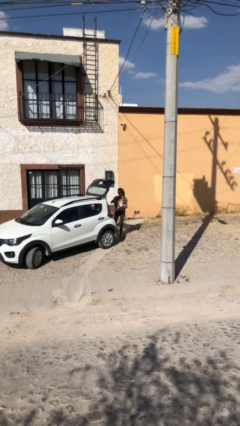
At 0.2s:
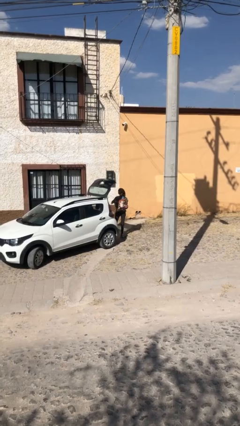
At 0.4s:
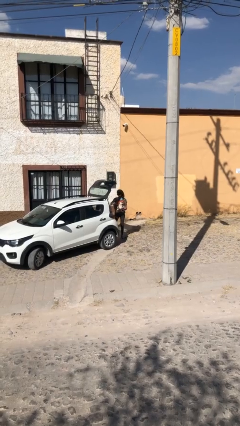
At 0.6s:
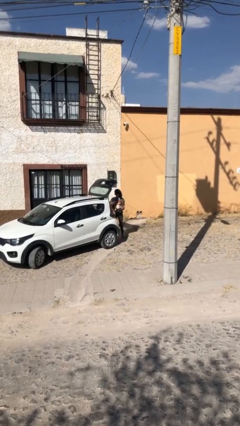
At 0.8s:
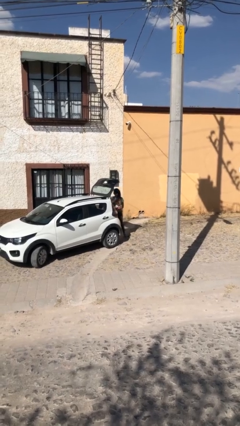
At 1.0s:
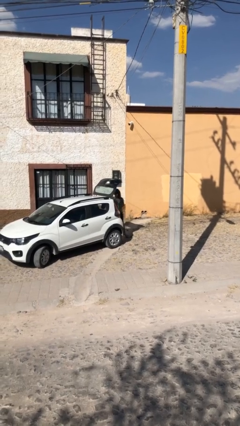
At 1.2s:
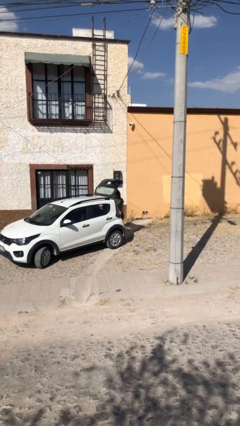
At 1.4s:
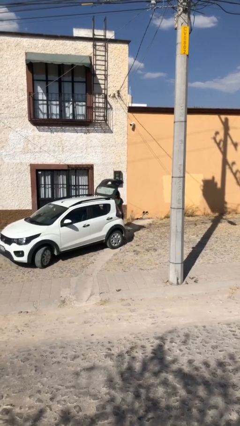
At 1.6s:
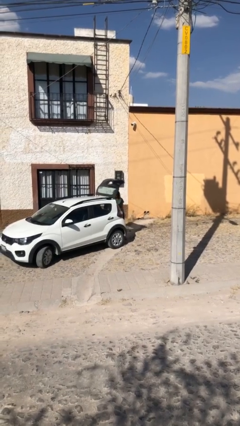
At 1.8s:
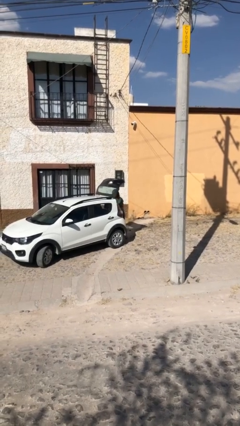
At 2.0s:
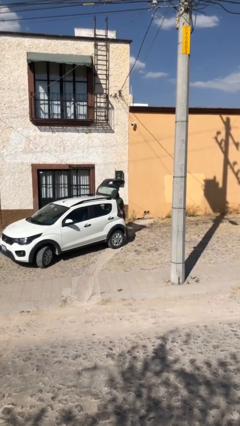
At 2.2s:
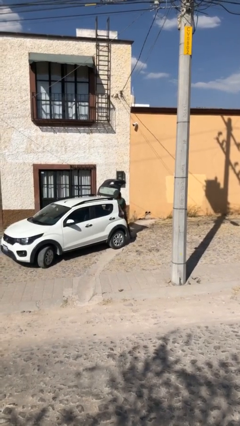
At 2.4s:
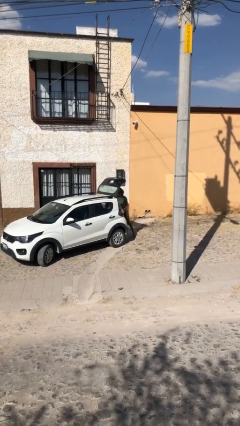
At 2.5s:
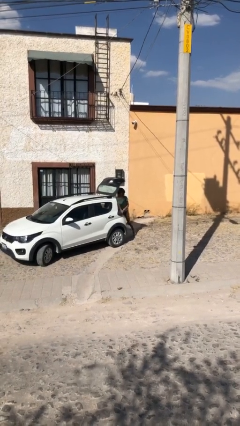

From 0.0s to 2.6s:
person loads car

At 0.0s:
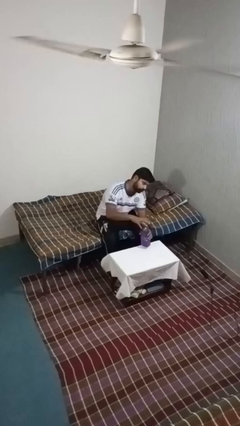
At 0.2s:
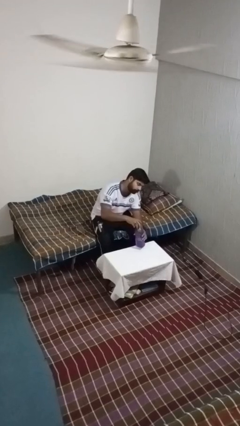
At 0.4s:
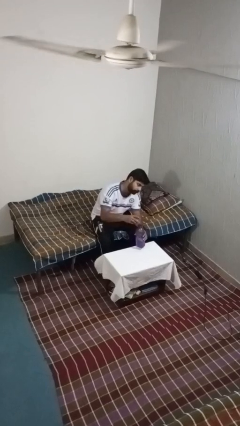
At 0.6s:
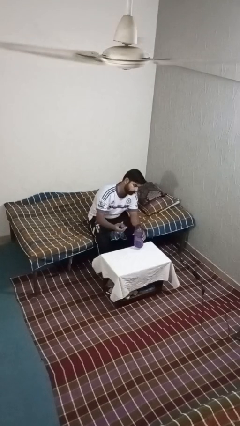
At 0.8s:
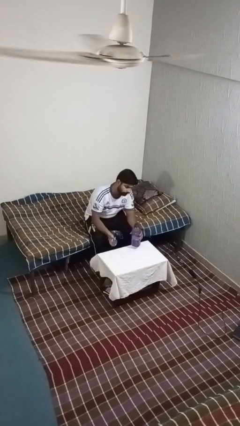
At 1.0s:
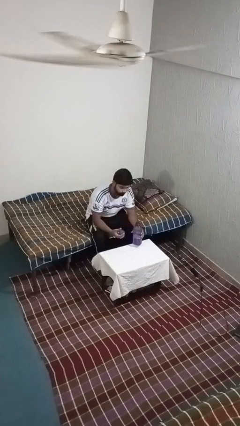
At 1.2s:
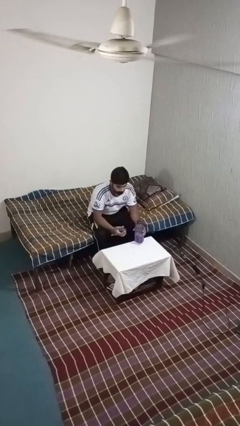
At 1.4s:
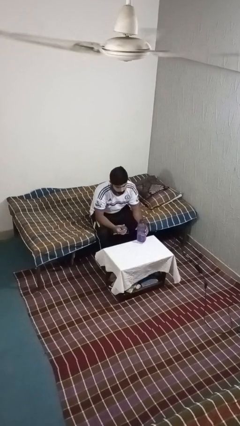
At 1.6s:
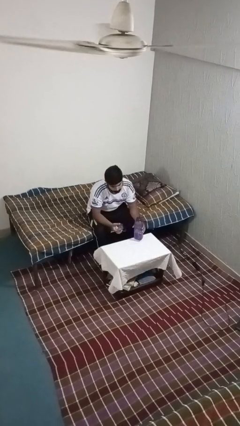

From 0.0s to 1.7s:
person unscrews lid from bottle

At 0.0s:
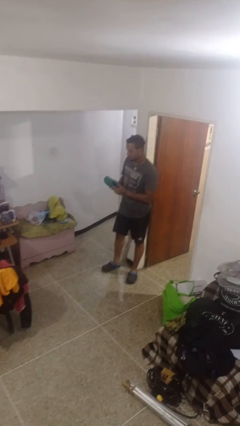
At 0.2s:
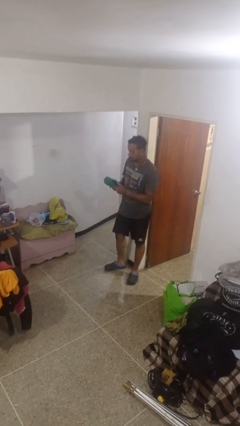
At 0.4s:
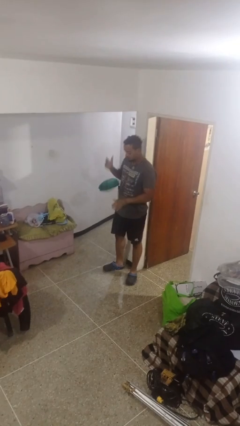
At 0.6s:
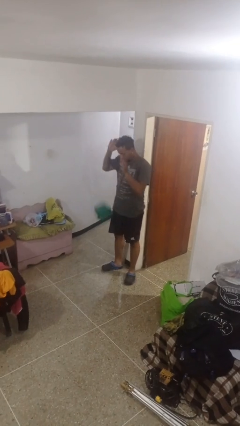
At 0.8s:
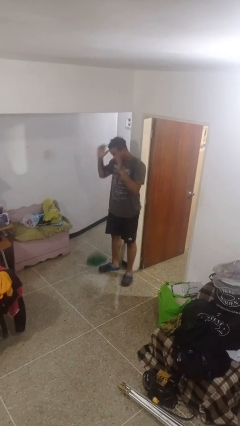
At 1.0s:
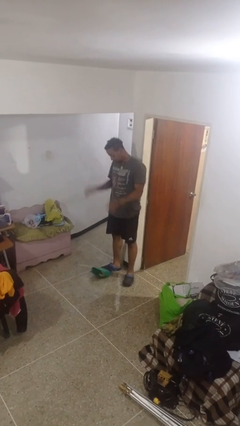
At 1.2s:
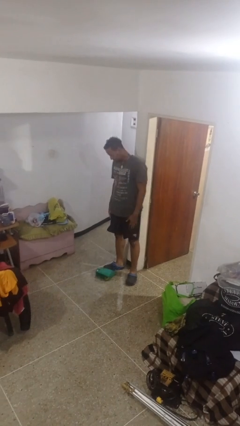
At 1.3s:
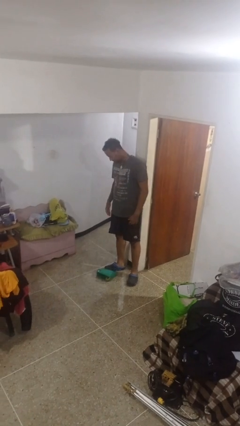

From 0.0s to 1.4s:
person drops object

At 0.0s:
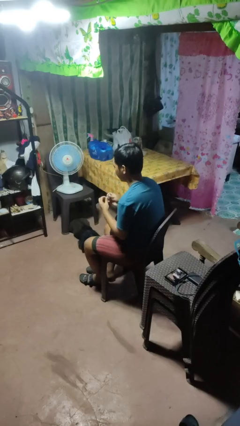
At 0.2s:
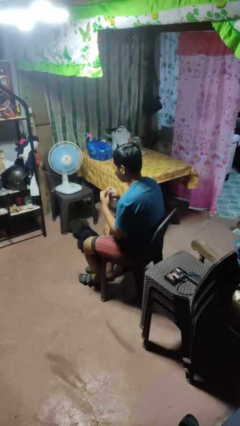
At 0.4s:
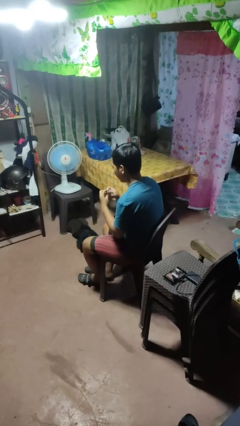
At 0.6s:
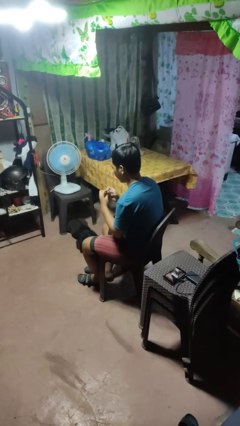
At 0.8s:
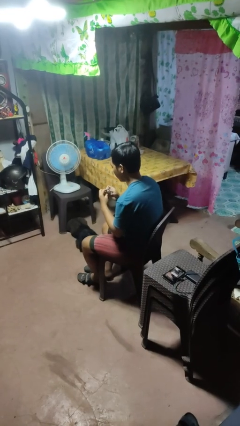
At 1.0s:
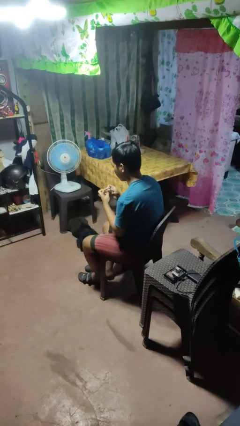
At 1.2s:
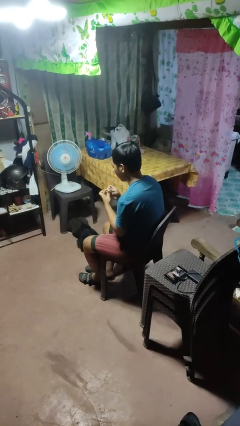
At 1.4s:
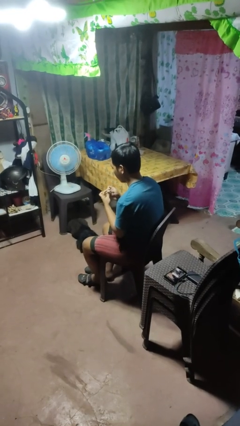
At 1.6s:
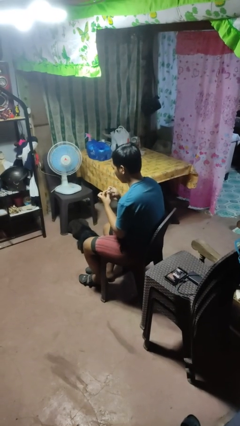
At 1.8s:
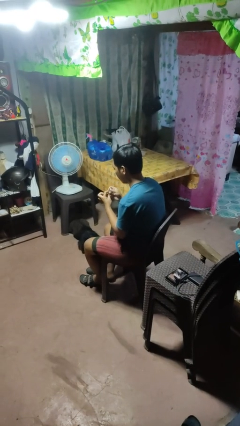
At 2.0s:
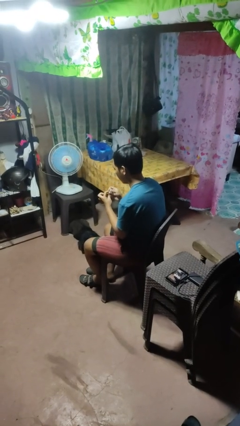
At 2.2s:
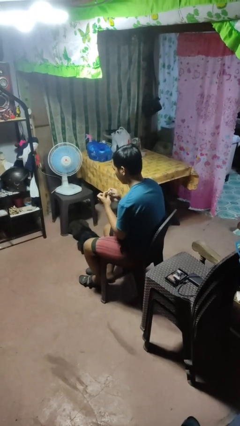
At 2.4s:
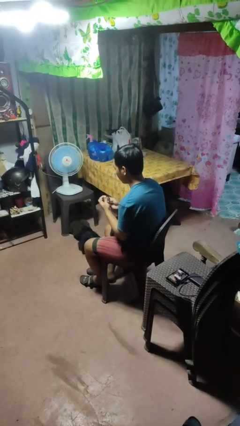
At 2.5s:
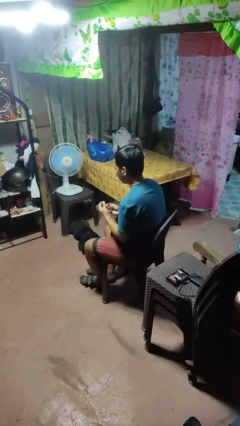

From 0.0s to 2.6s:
person files fingernails

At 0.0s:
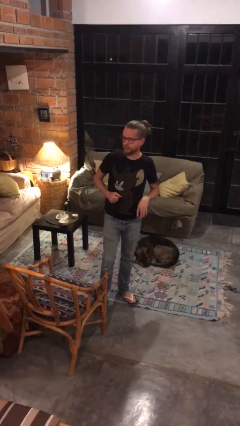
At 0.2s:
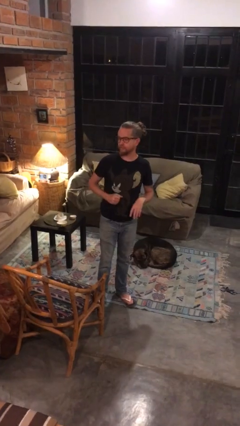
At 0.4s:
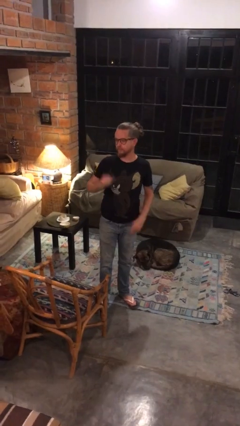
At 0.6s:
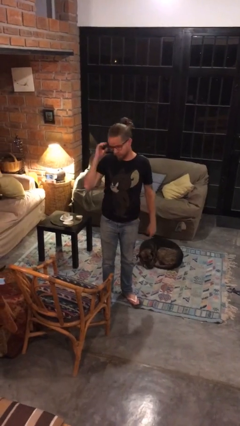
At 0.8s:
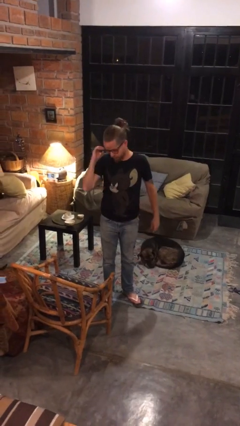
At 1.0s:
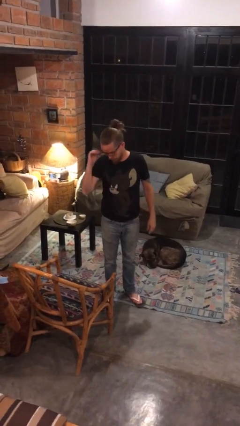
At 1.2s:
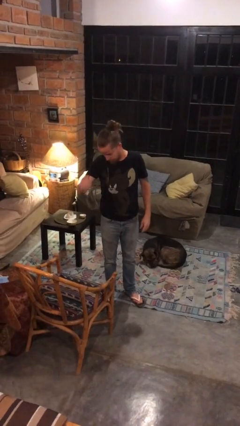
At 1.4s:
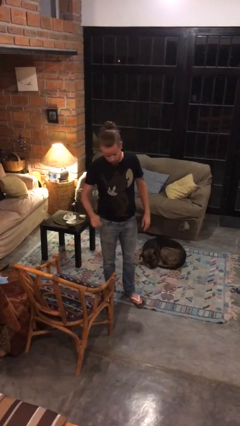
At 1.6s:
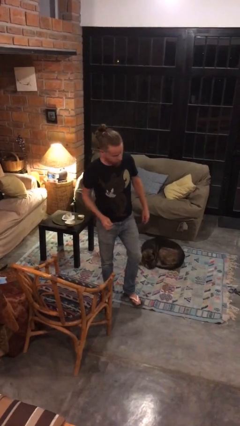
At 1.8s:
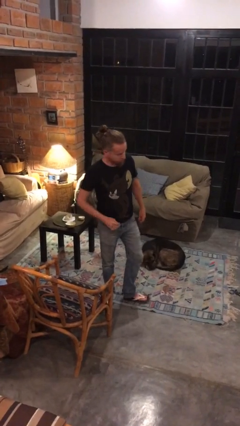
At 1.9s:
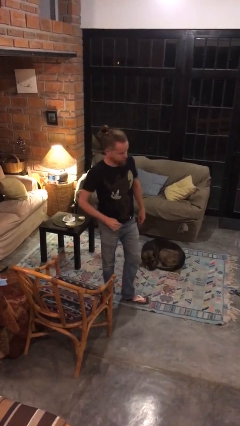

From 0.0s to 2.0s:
person takes off glasses

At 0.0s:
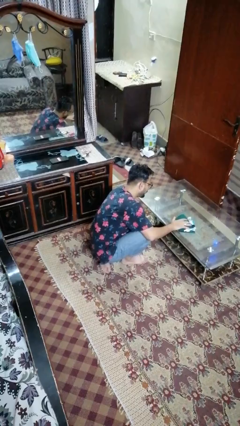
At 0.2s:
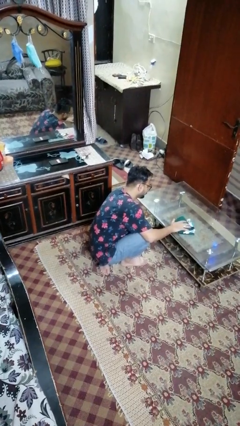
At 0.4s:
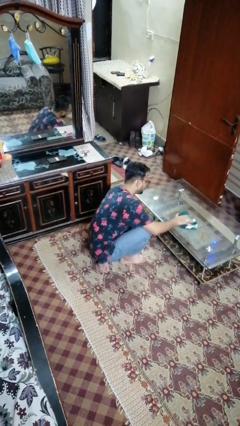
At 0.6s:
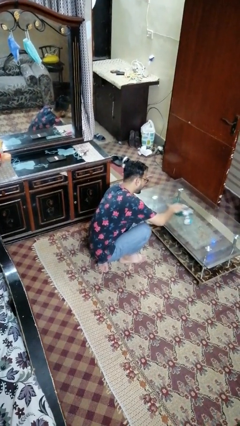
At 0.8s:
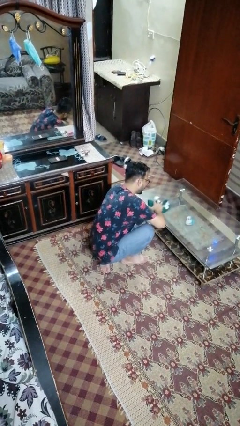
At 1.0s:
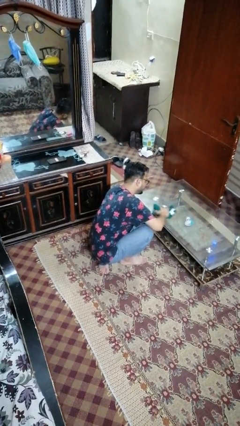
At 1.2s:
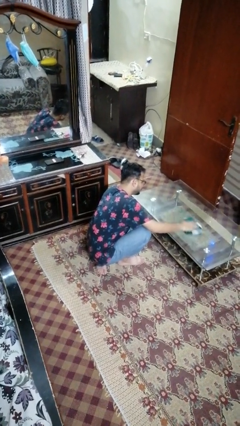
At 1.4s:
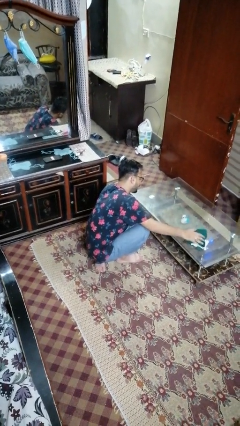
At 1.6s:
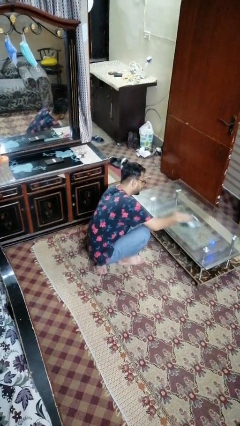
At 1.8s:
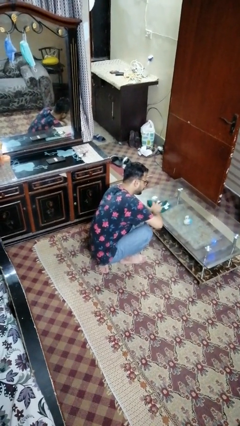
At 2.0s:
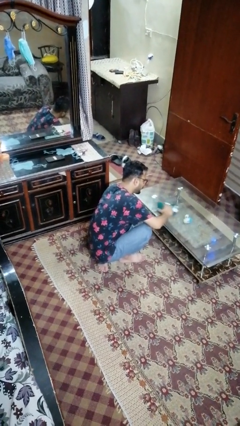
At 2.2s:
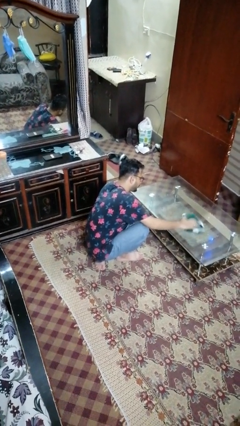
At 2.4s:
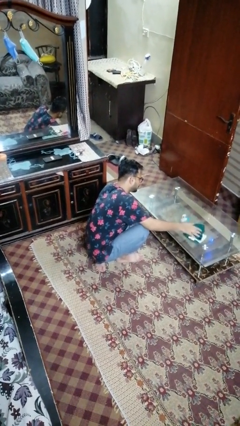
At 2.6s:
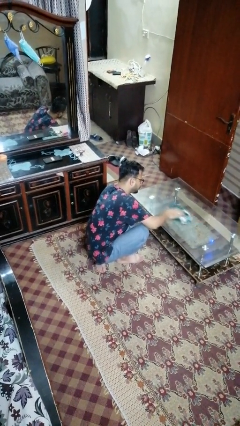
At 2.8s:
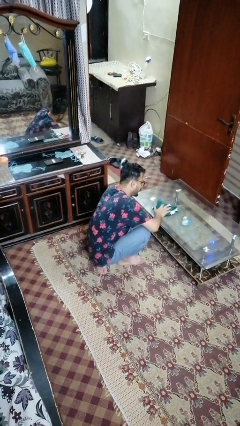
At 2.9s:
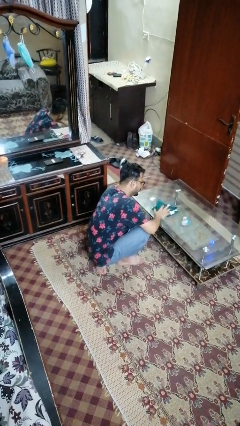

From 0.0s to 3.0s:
person cleans table with rag

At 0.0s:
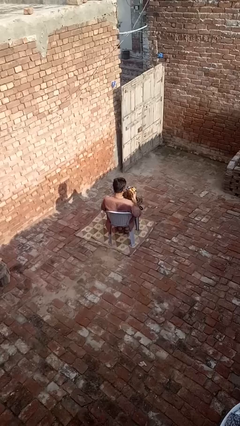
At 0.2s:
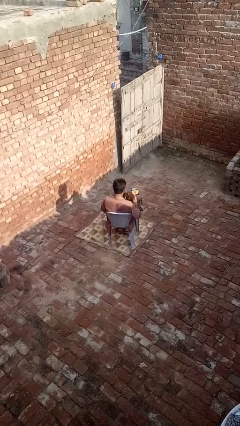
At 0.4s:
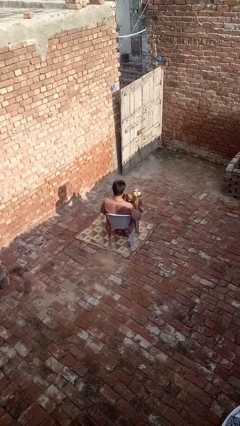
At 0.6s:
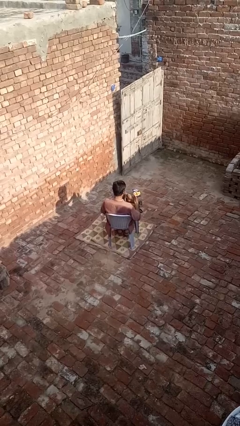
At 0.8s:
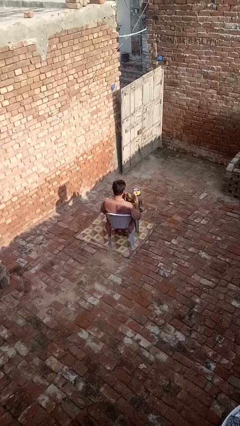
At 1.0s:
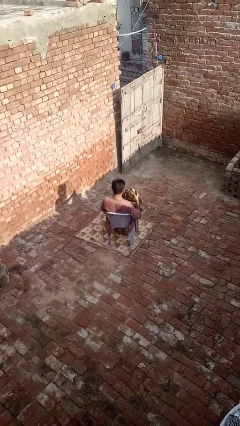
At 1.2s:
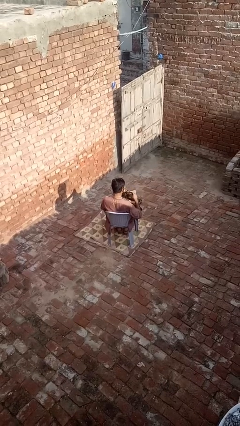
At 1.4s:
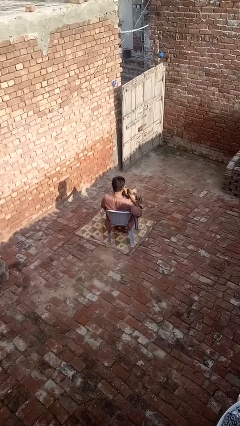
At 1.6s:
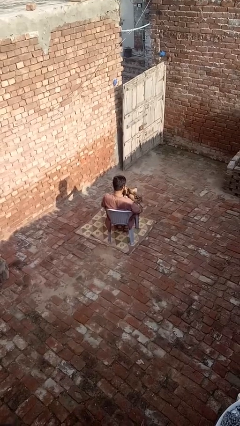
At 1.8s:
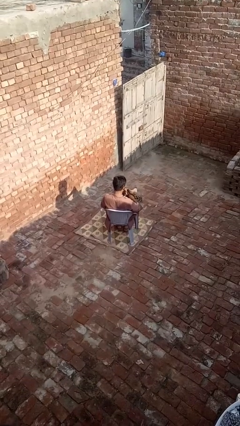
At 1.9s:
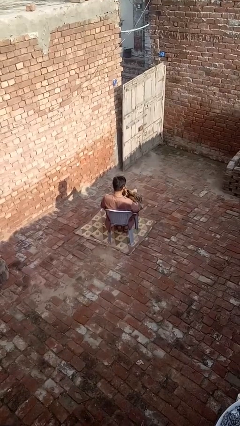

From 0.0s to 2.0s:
person puts object into purse

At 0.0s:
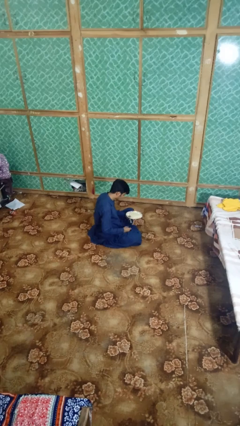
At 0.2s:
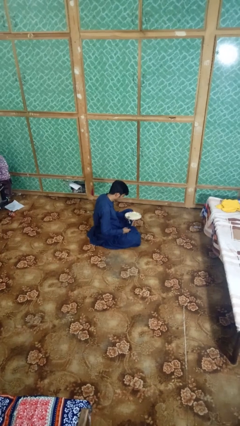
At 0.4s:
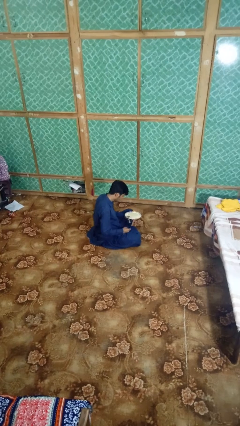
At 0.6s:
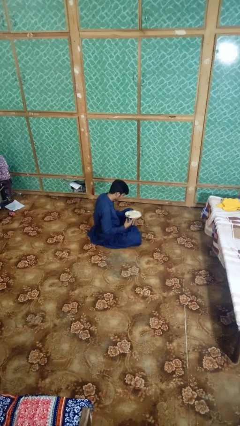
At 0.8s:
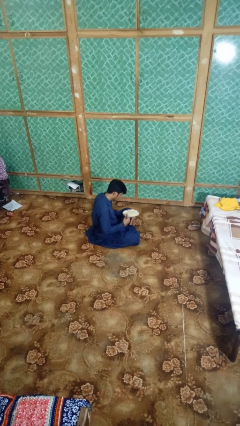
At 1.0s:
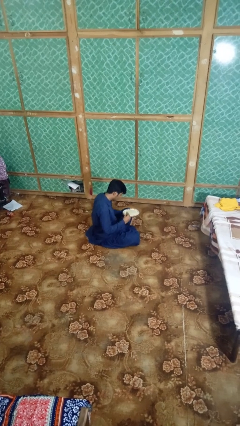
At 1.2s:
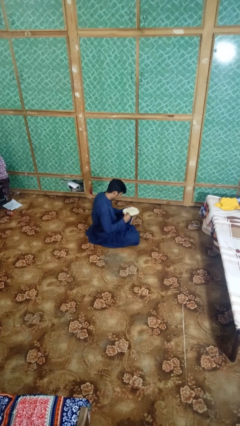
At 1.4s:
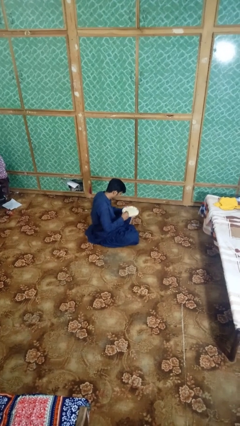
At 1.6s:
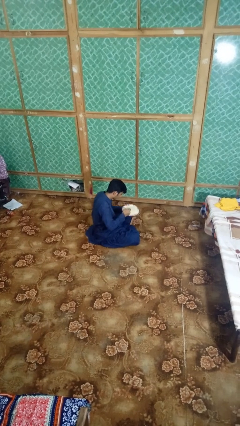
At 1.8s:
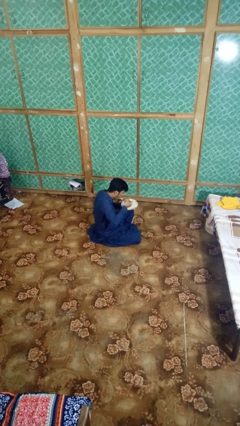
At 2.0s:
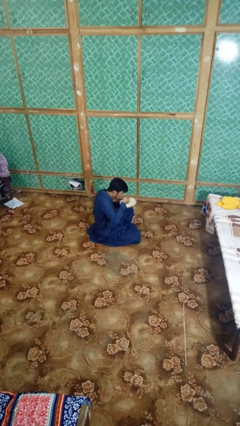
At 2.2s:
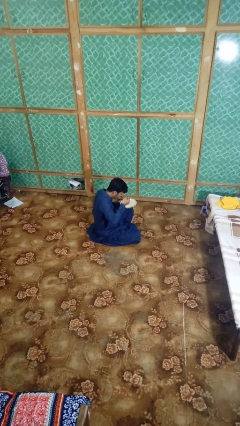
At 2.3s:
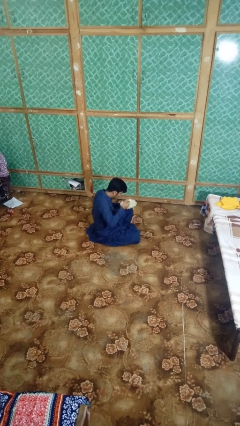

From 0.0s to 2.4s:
person eats with utensil
